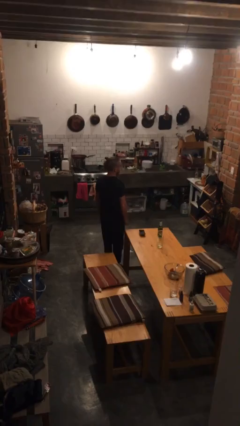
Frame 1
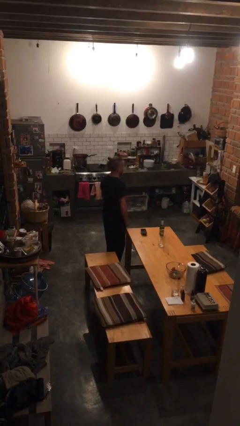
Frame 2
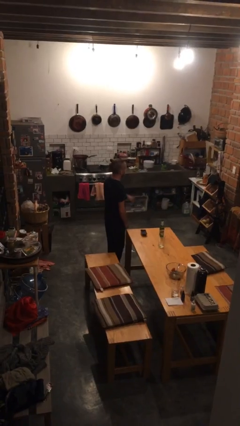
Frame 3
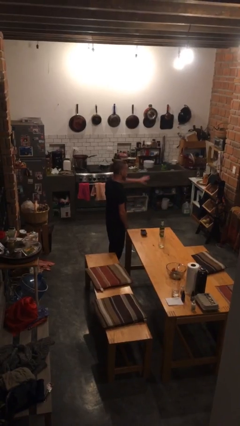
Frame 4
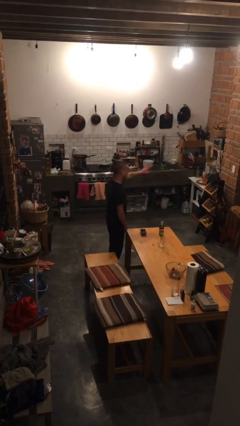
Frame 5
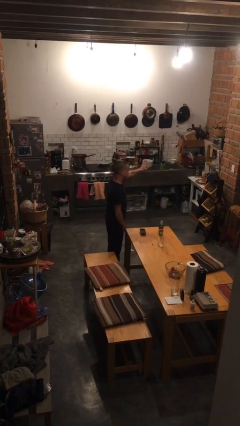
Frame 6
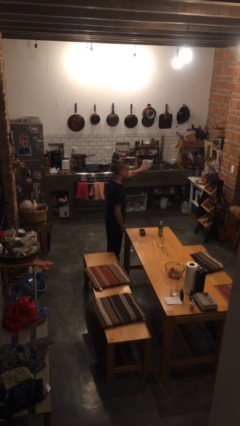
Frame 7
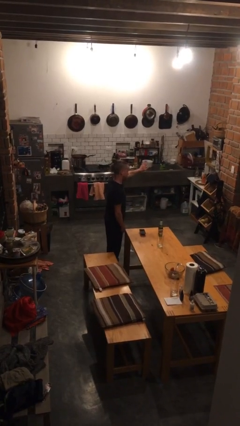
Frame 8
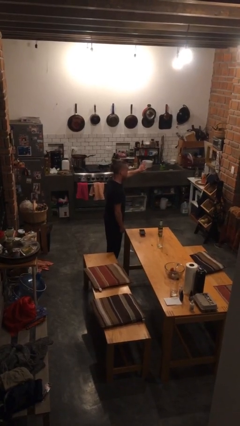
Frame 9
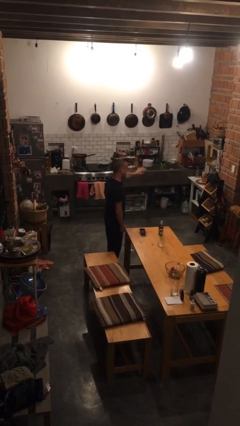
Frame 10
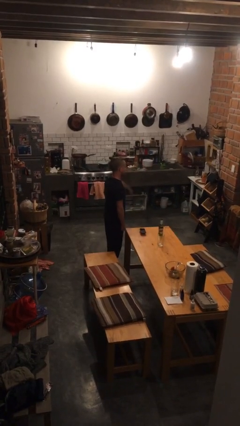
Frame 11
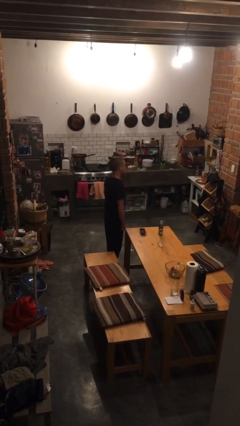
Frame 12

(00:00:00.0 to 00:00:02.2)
person gestures stop

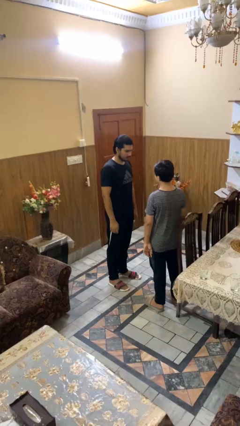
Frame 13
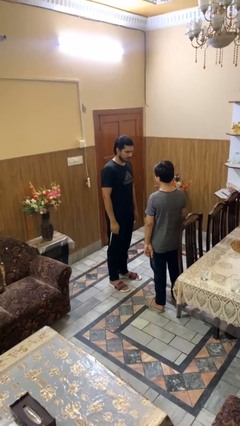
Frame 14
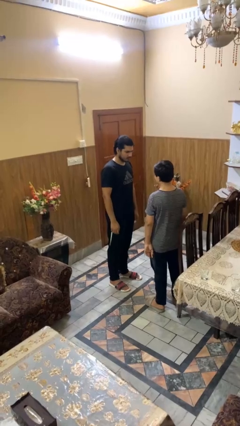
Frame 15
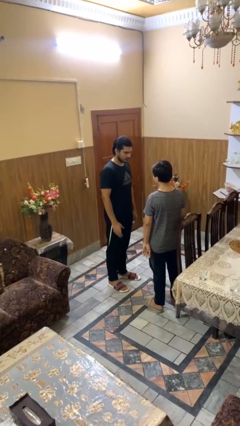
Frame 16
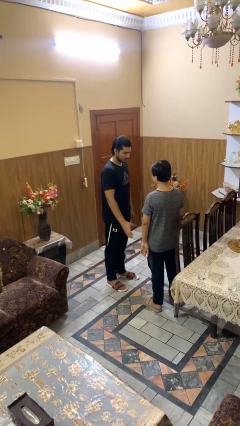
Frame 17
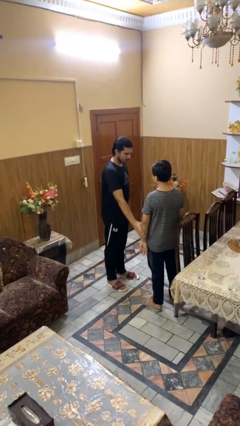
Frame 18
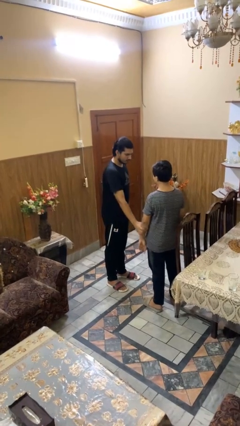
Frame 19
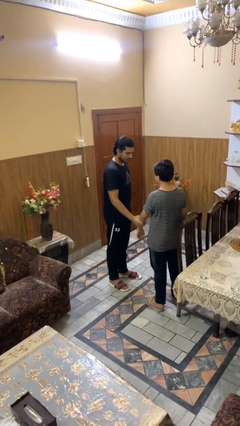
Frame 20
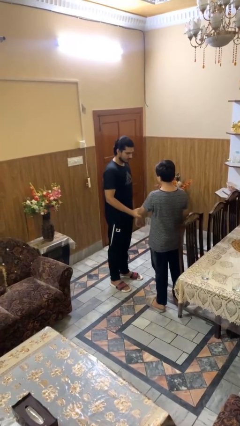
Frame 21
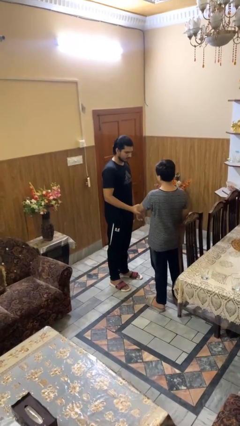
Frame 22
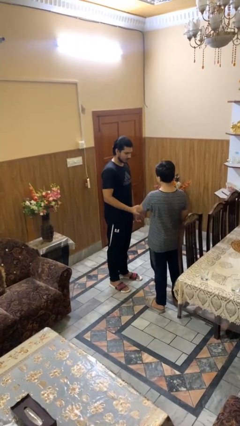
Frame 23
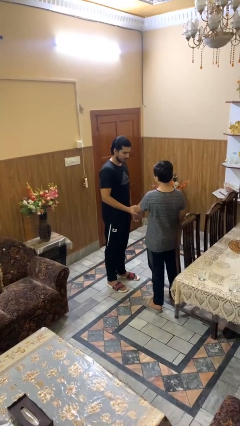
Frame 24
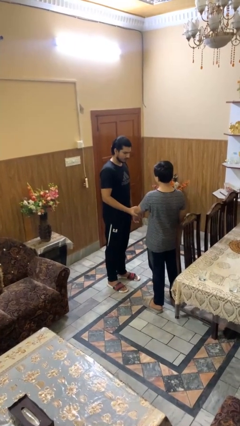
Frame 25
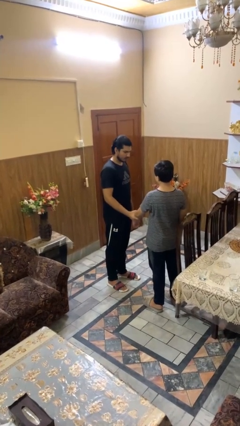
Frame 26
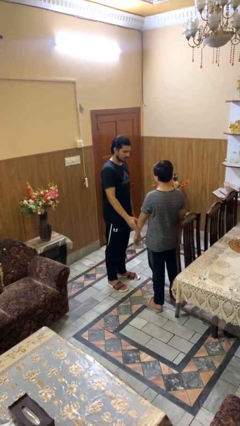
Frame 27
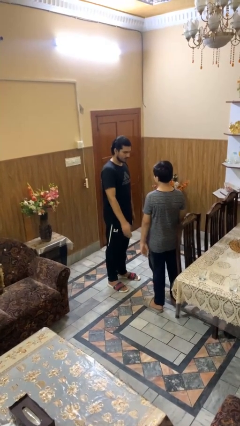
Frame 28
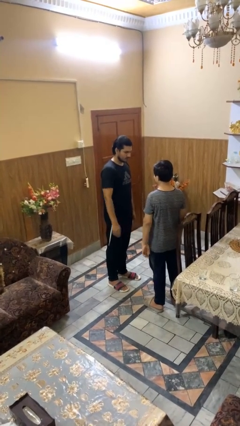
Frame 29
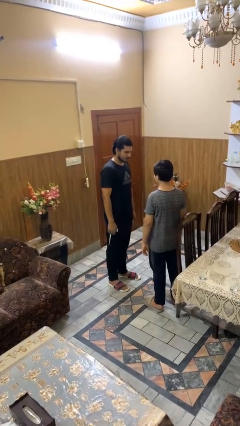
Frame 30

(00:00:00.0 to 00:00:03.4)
person grabs person by forearm

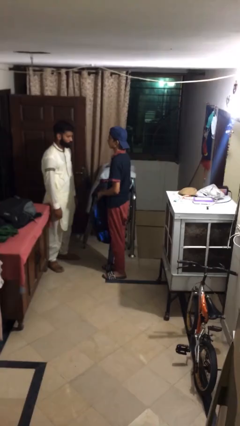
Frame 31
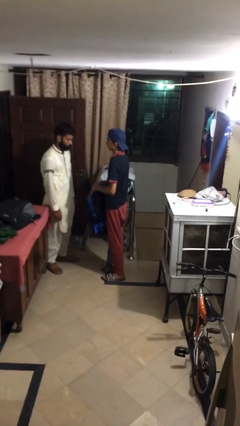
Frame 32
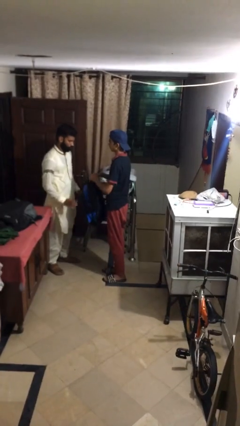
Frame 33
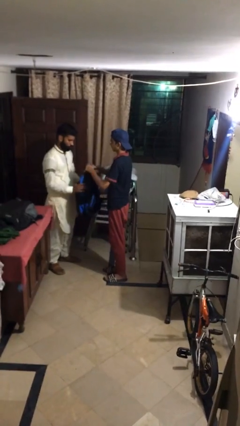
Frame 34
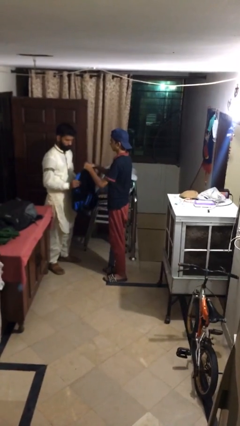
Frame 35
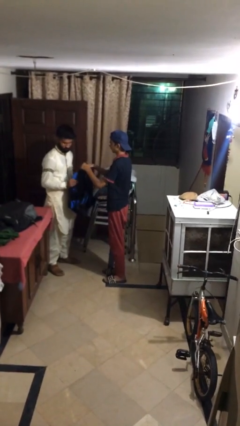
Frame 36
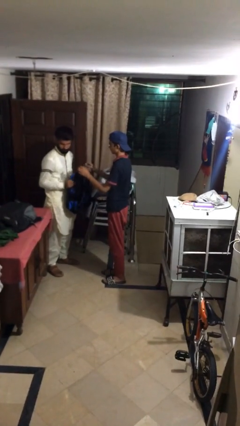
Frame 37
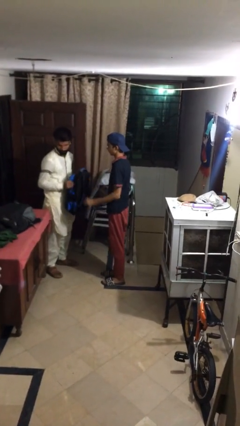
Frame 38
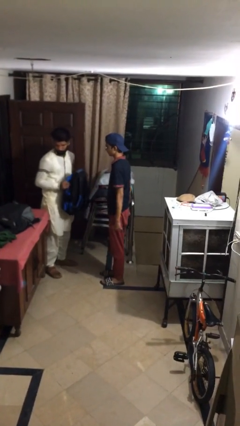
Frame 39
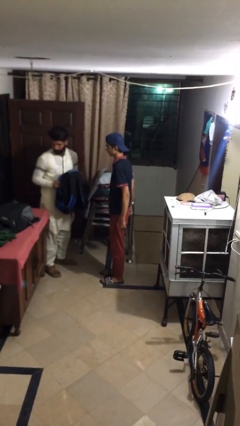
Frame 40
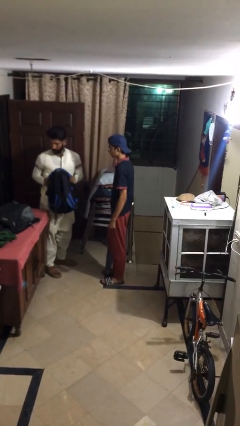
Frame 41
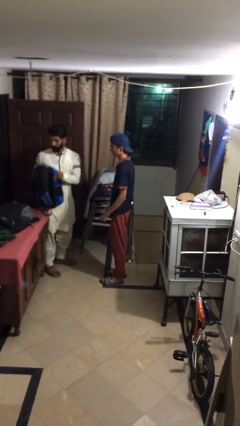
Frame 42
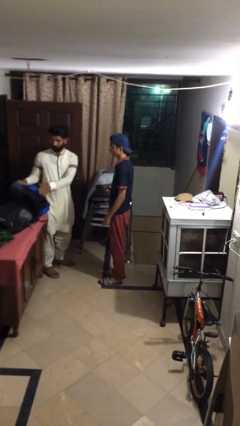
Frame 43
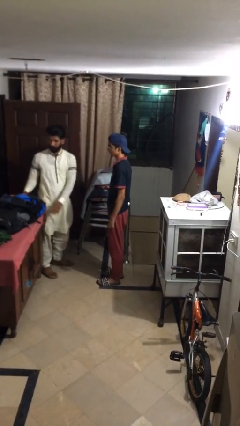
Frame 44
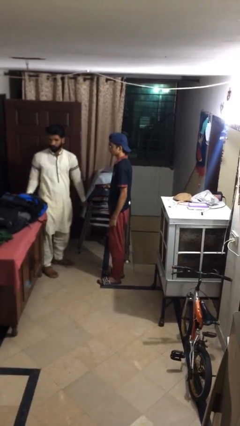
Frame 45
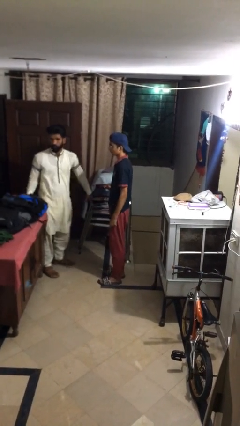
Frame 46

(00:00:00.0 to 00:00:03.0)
person transfers object to person

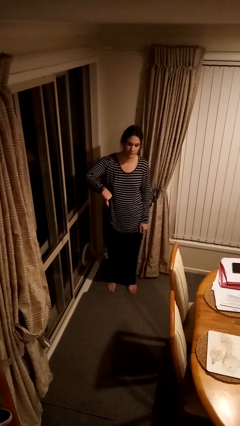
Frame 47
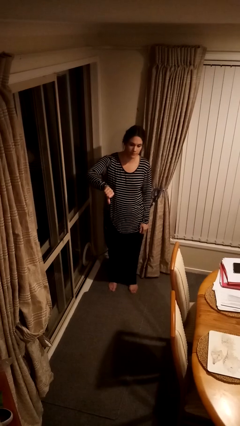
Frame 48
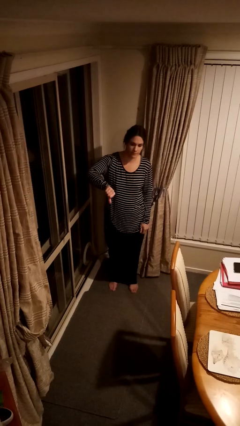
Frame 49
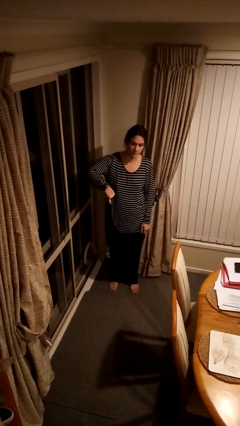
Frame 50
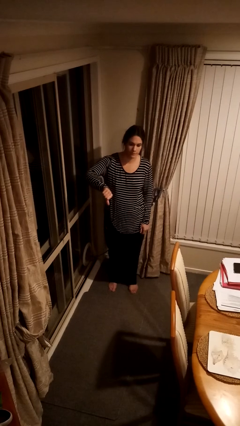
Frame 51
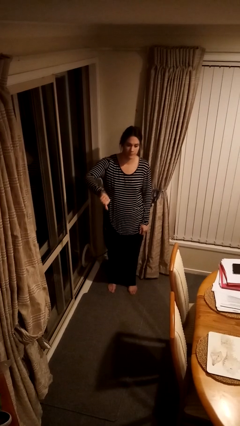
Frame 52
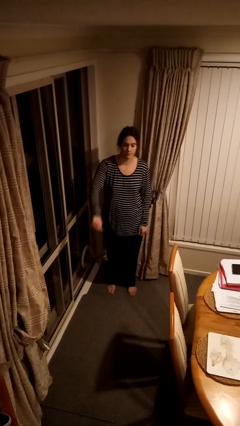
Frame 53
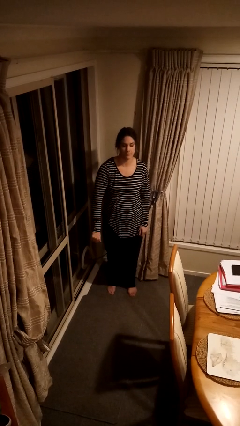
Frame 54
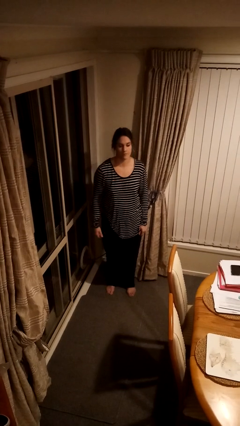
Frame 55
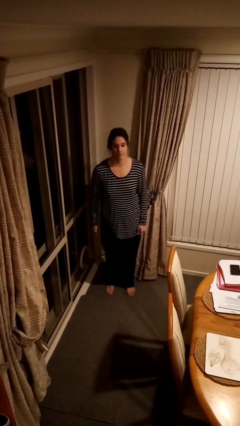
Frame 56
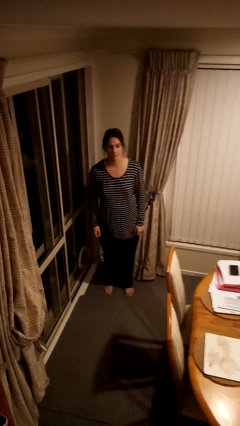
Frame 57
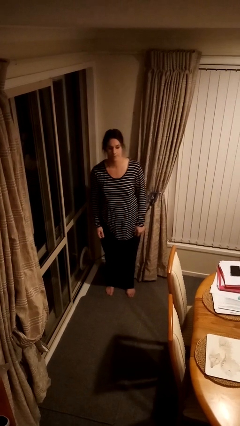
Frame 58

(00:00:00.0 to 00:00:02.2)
person gestures thumbs down

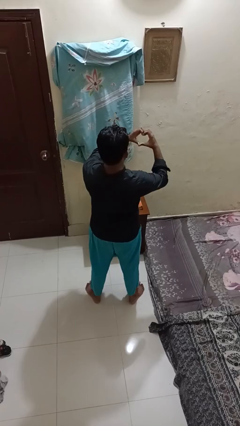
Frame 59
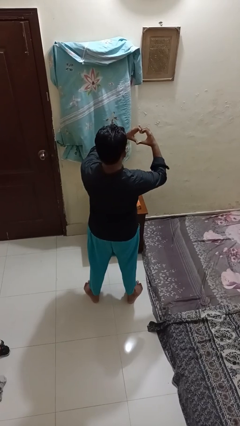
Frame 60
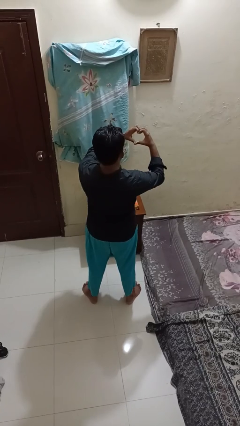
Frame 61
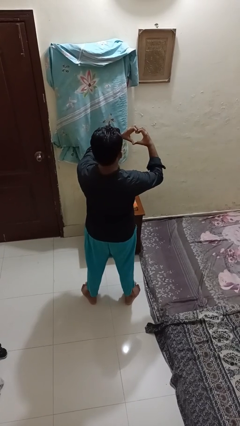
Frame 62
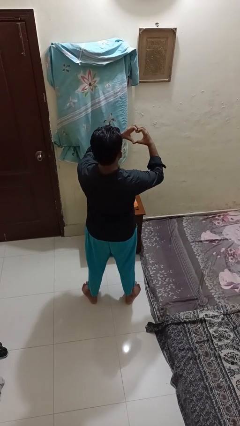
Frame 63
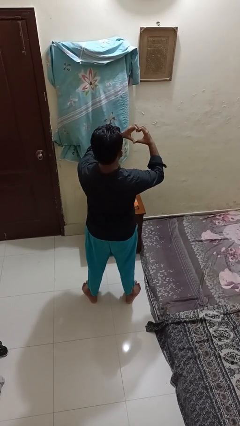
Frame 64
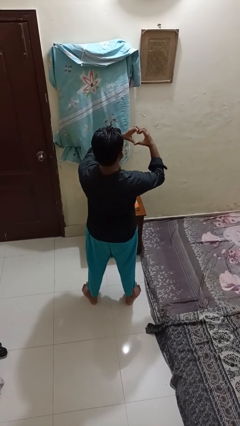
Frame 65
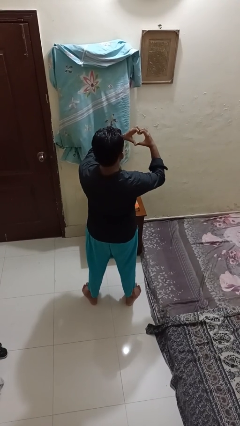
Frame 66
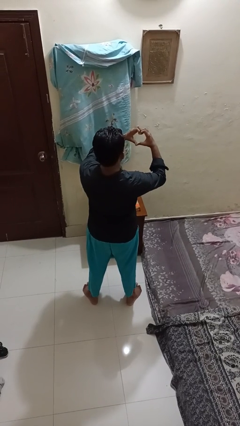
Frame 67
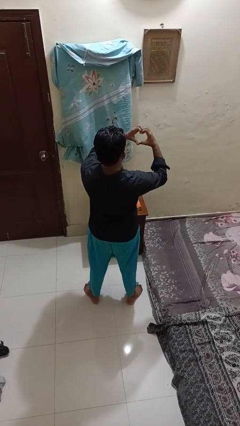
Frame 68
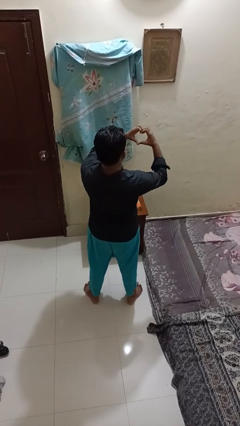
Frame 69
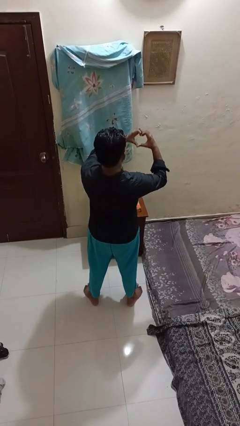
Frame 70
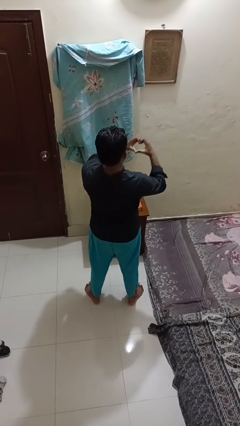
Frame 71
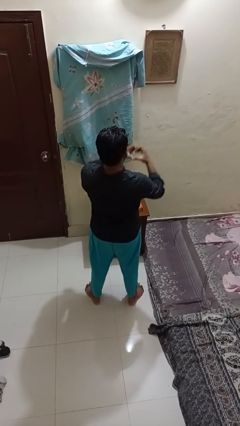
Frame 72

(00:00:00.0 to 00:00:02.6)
person gestures heart

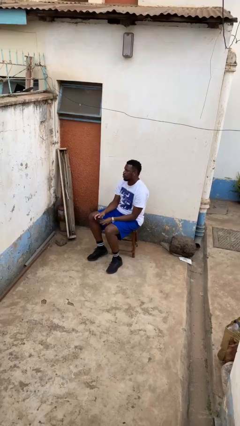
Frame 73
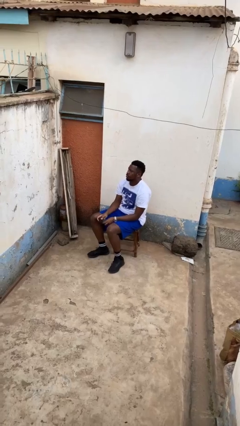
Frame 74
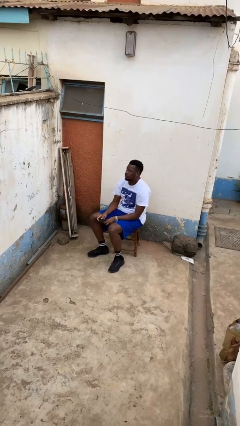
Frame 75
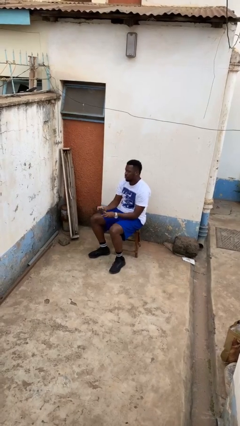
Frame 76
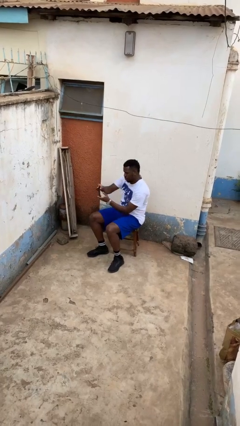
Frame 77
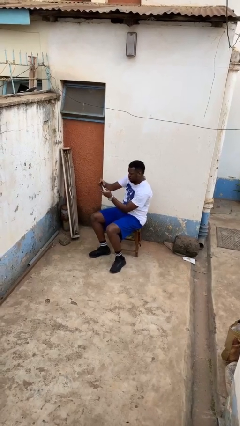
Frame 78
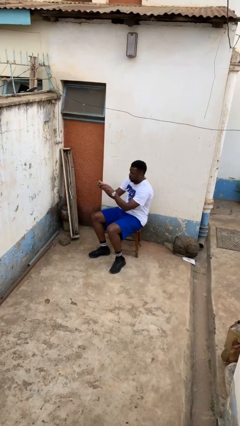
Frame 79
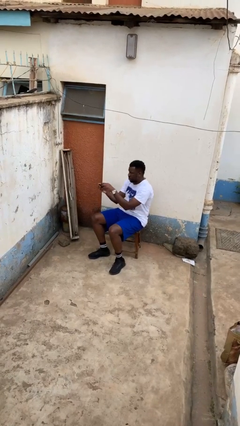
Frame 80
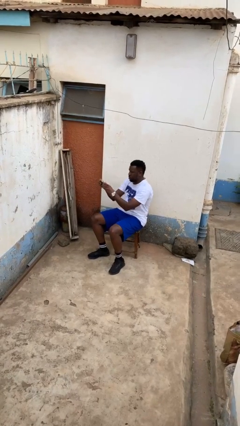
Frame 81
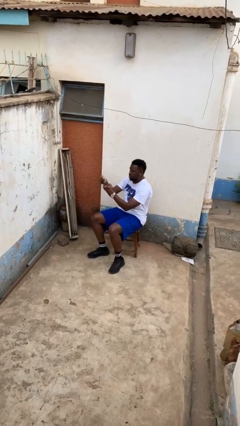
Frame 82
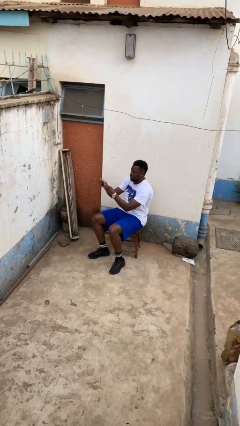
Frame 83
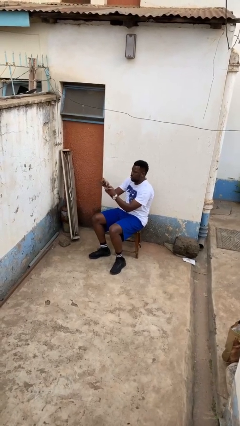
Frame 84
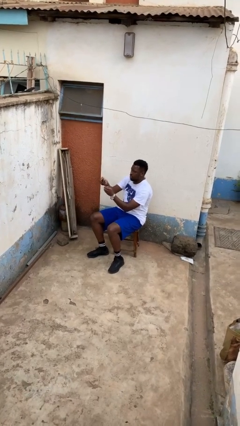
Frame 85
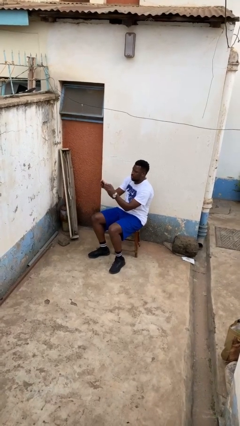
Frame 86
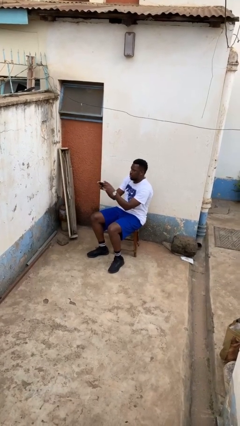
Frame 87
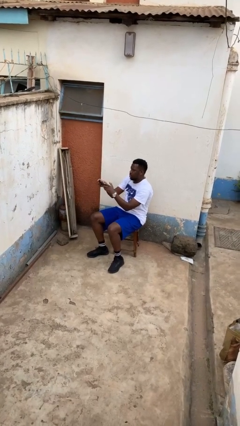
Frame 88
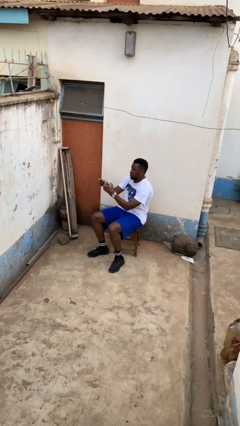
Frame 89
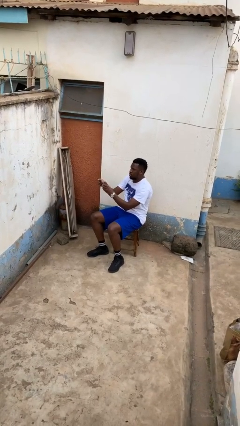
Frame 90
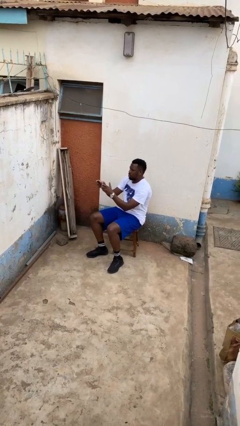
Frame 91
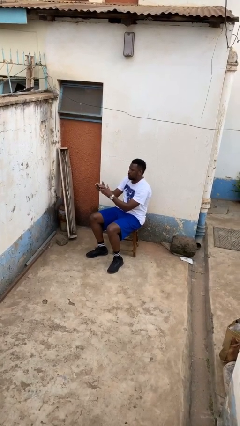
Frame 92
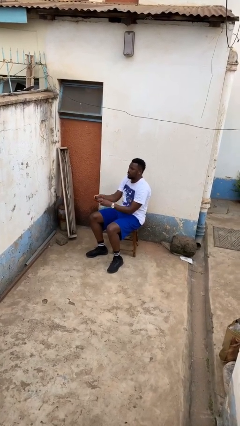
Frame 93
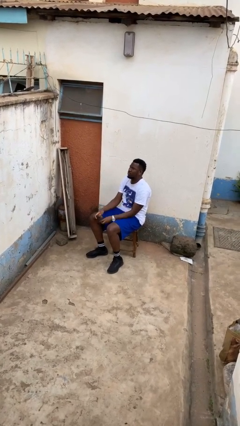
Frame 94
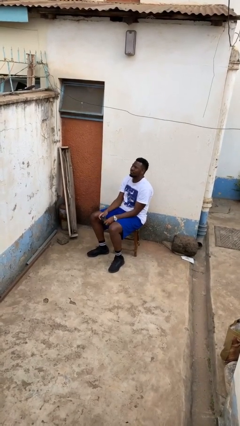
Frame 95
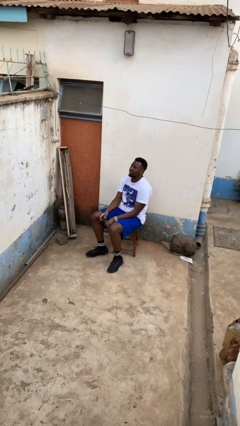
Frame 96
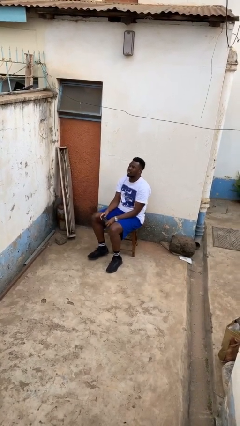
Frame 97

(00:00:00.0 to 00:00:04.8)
person interacts with handheld game
